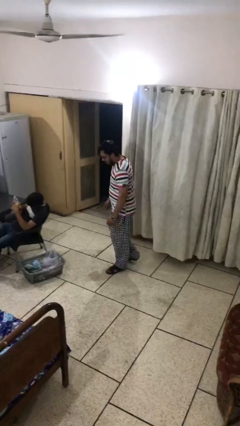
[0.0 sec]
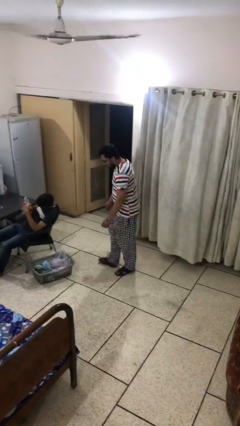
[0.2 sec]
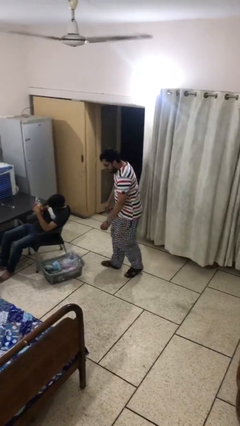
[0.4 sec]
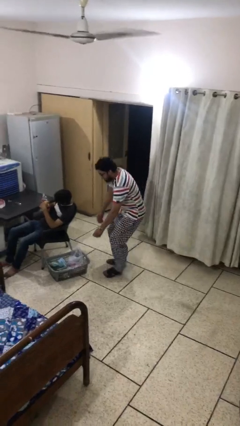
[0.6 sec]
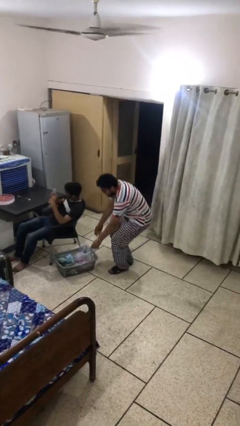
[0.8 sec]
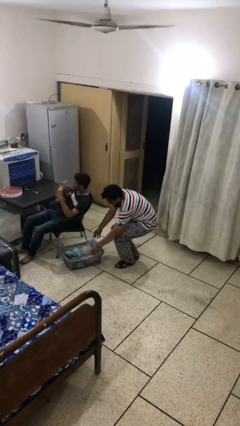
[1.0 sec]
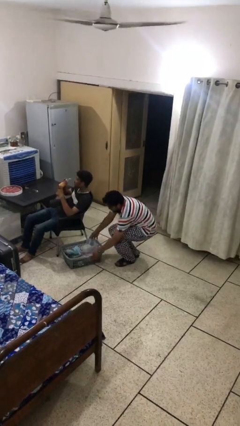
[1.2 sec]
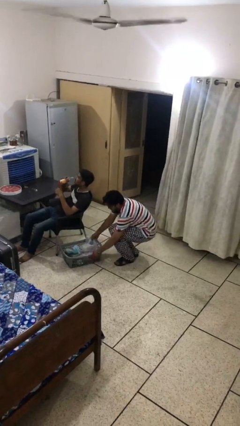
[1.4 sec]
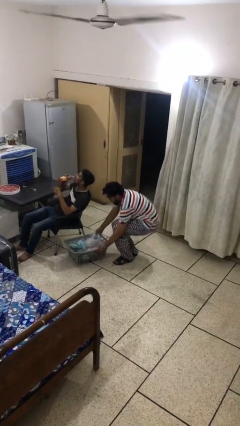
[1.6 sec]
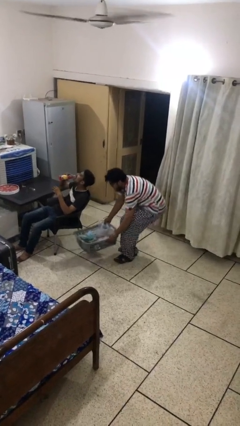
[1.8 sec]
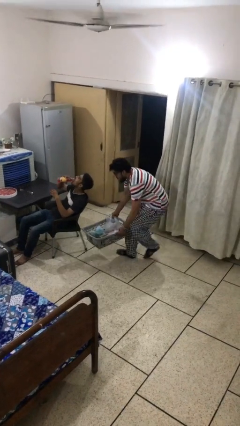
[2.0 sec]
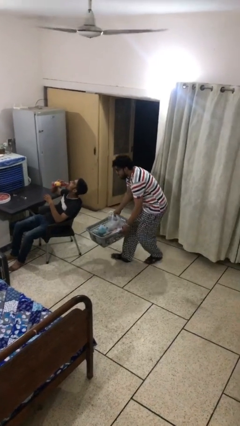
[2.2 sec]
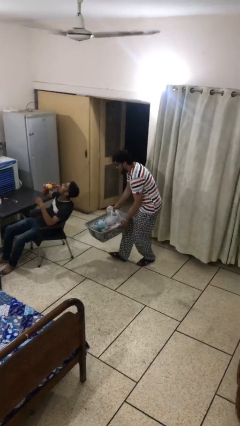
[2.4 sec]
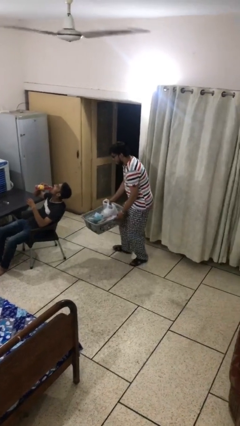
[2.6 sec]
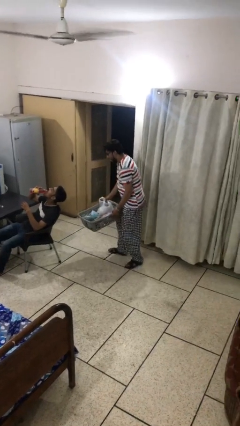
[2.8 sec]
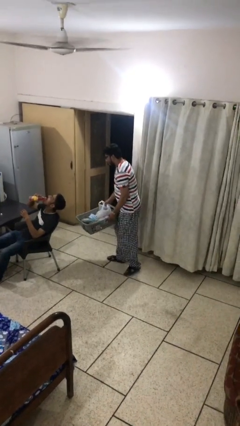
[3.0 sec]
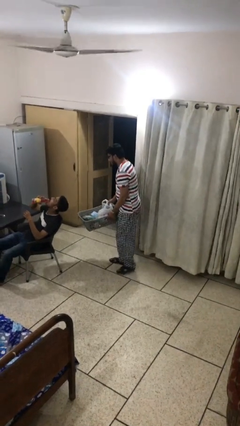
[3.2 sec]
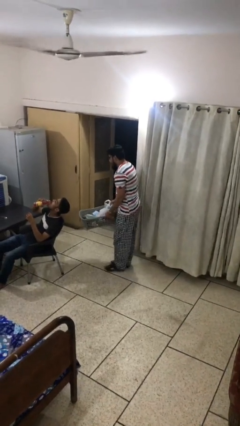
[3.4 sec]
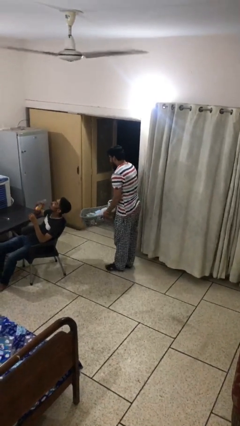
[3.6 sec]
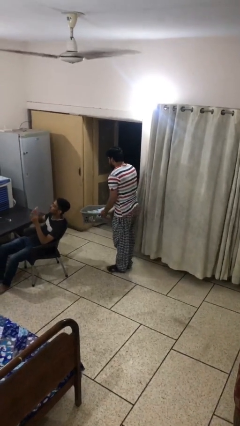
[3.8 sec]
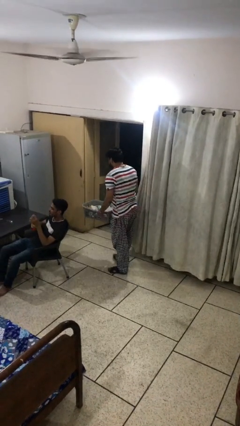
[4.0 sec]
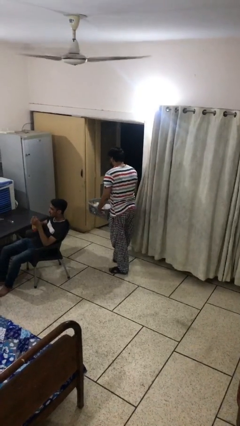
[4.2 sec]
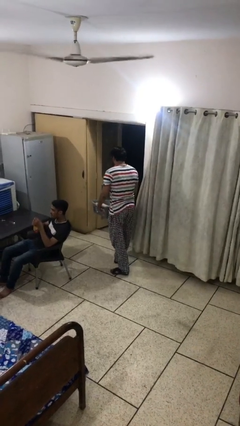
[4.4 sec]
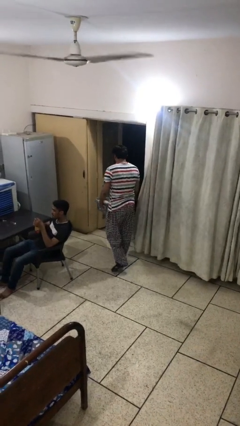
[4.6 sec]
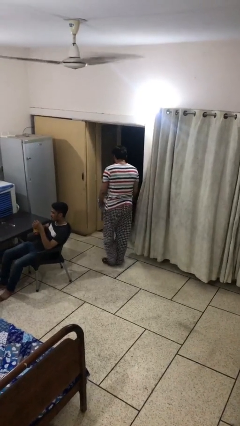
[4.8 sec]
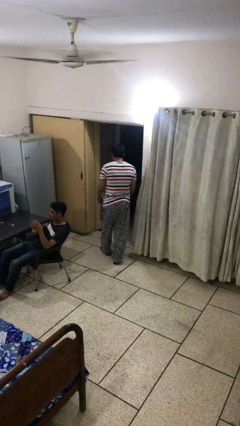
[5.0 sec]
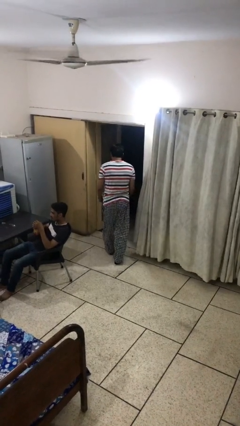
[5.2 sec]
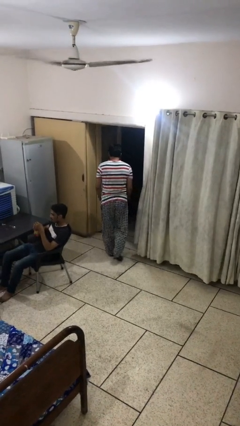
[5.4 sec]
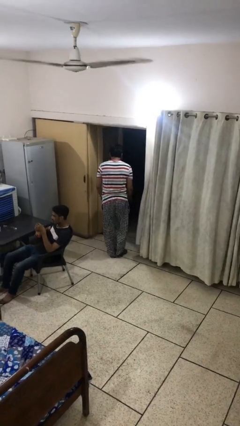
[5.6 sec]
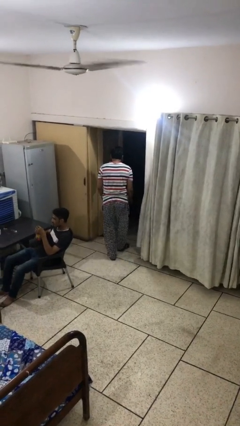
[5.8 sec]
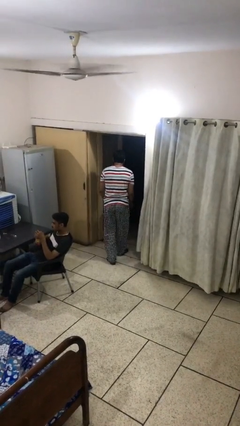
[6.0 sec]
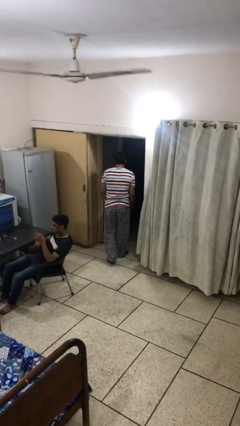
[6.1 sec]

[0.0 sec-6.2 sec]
person steals object from person

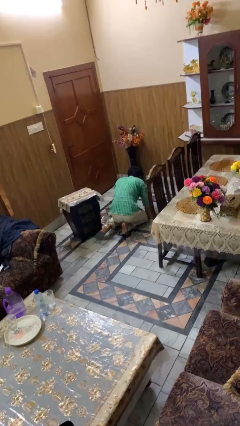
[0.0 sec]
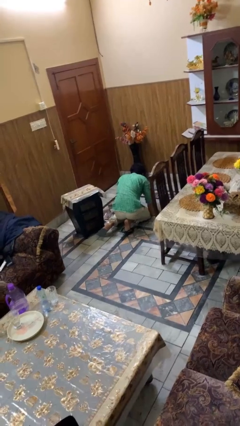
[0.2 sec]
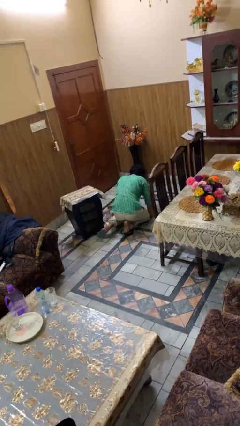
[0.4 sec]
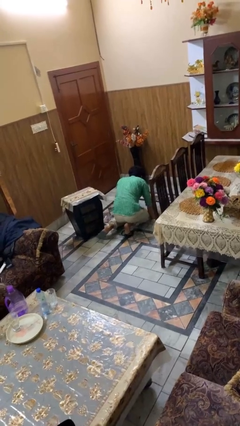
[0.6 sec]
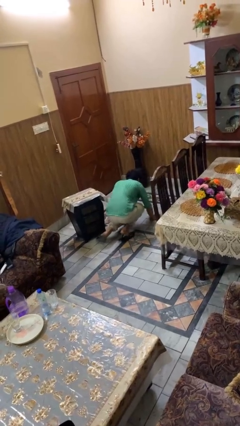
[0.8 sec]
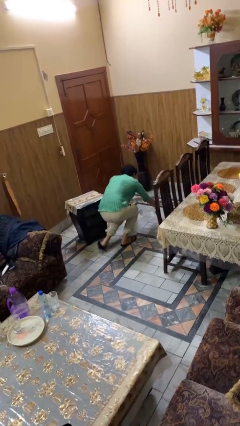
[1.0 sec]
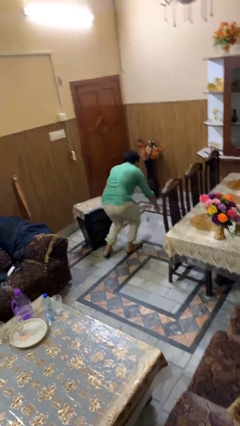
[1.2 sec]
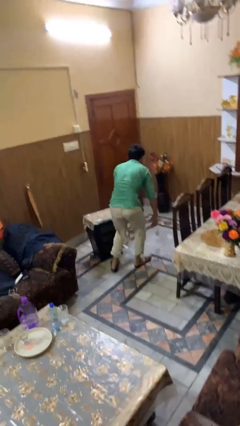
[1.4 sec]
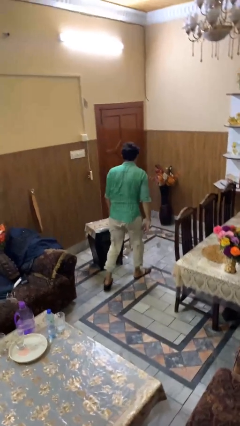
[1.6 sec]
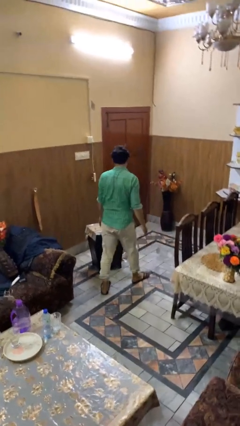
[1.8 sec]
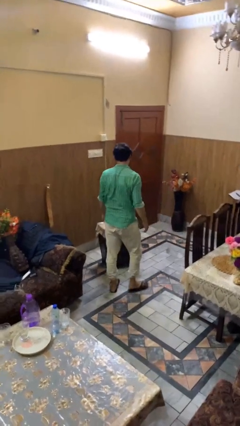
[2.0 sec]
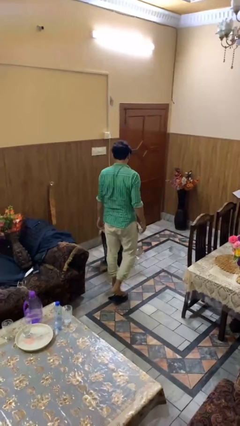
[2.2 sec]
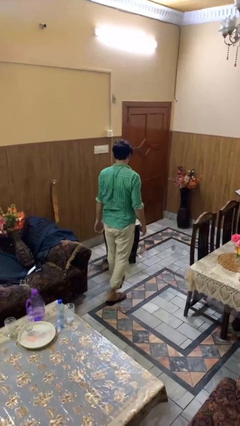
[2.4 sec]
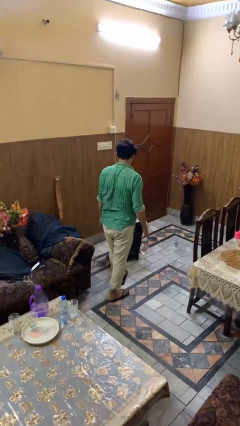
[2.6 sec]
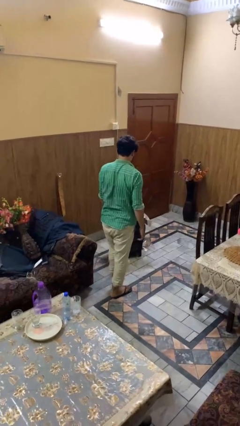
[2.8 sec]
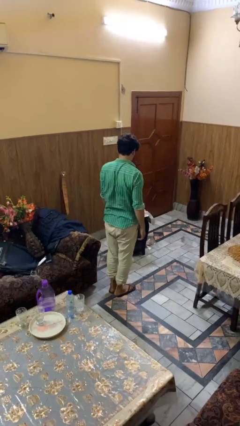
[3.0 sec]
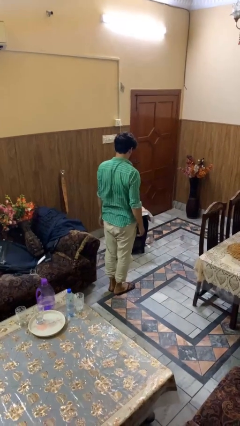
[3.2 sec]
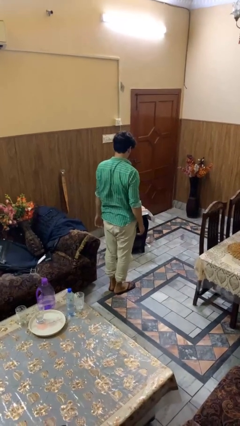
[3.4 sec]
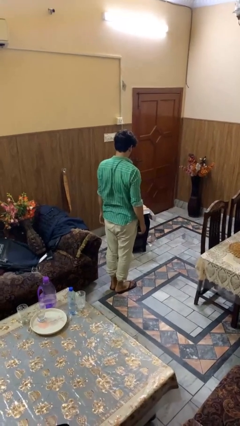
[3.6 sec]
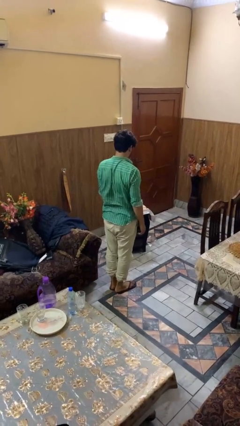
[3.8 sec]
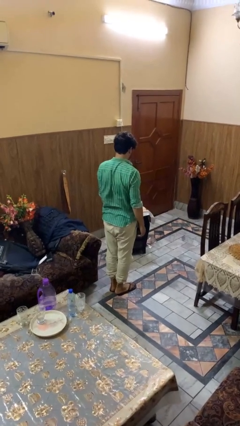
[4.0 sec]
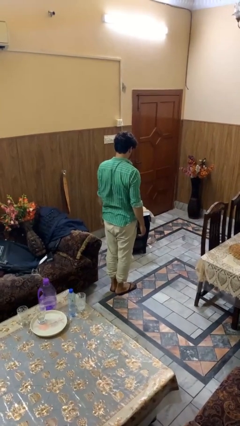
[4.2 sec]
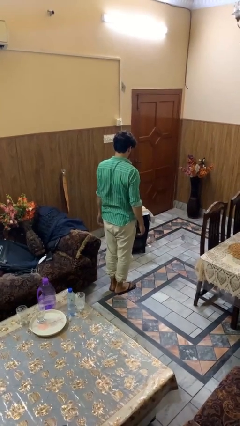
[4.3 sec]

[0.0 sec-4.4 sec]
person stands up from floor

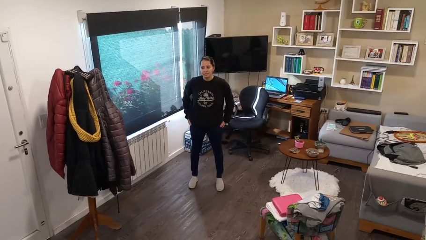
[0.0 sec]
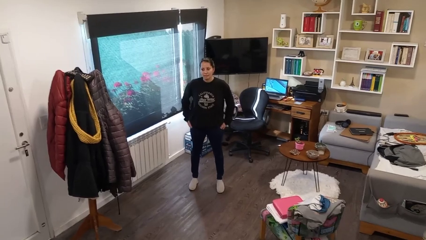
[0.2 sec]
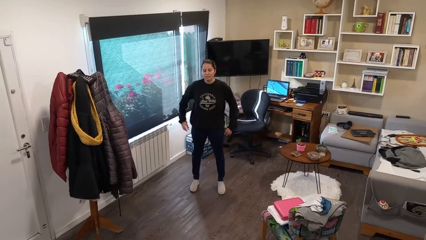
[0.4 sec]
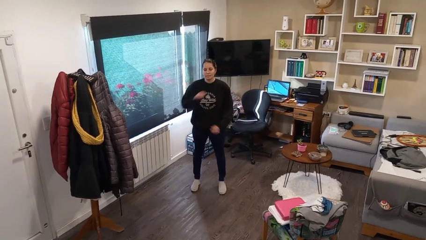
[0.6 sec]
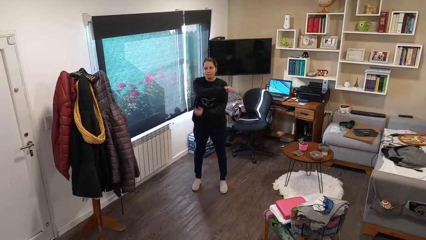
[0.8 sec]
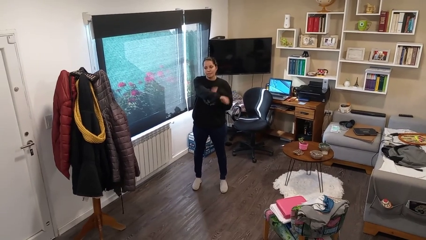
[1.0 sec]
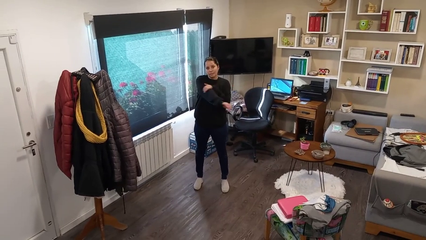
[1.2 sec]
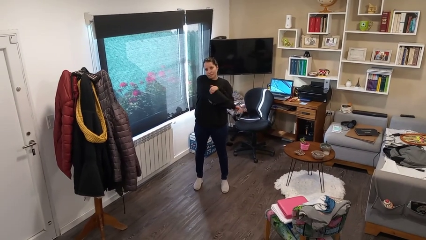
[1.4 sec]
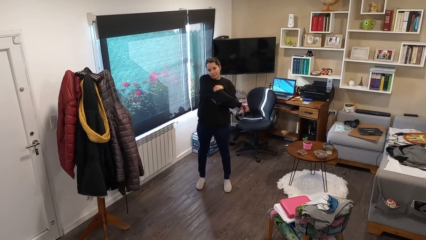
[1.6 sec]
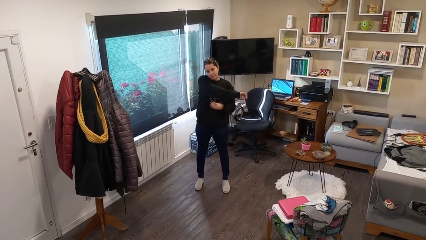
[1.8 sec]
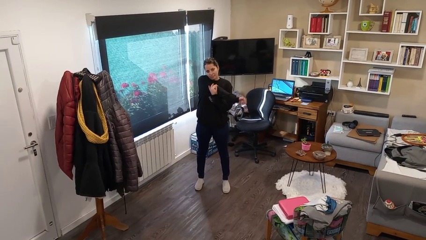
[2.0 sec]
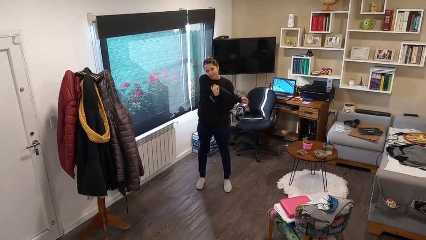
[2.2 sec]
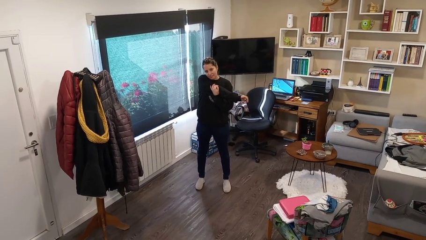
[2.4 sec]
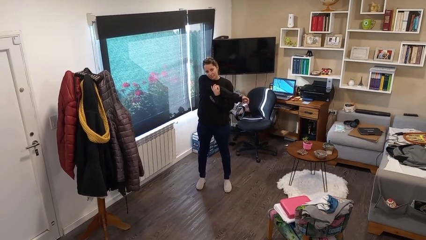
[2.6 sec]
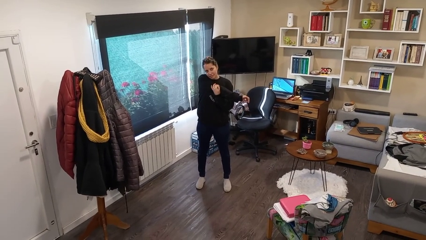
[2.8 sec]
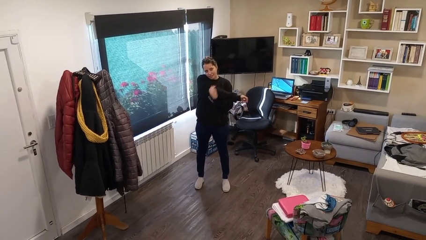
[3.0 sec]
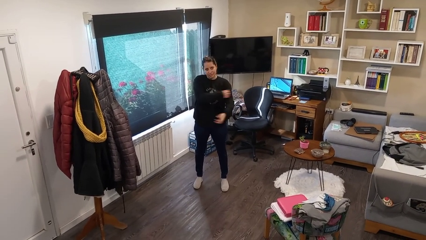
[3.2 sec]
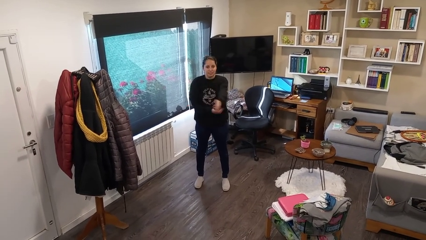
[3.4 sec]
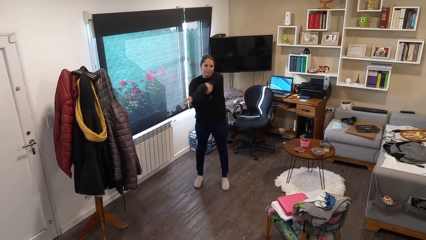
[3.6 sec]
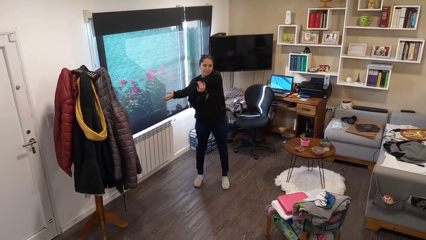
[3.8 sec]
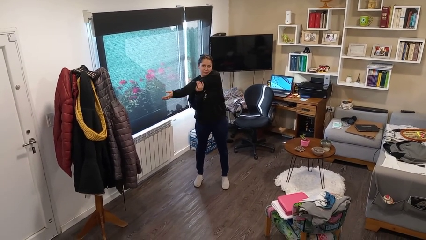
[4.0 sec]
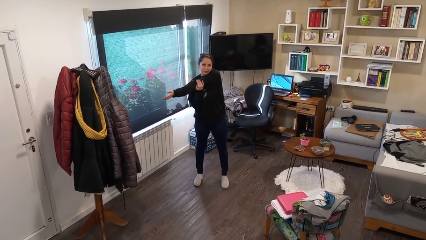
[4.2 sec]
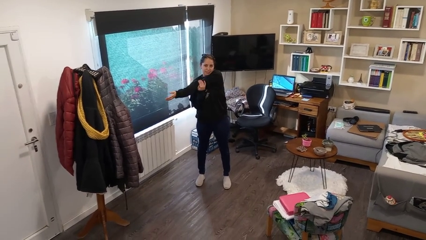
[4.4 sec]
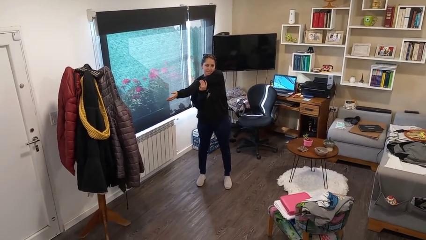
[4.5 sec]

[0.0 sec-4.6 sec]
person stretches arms to side

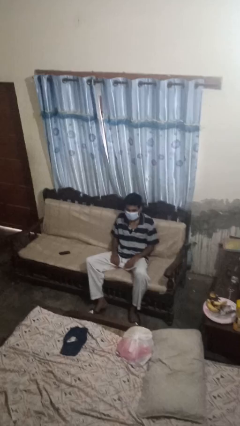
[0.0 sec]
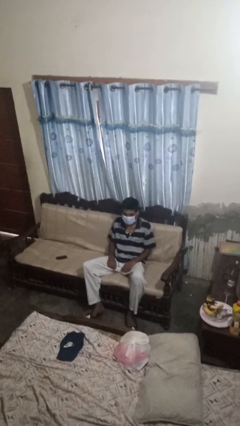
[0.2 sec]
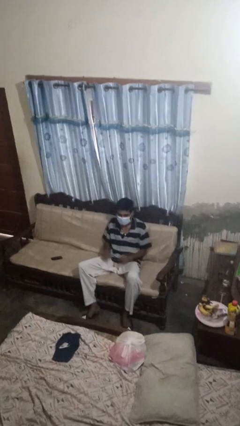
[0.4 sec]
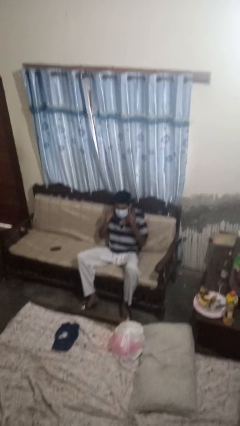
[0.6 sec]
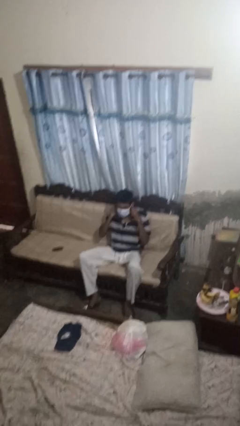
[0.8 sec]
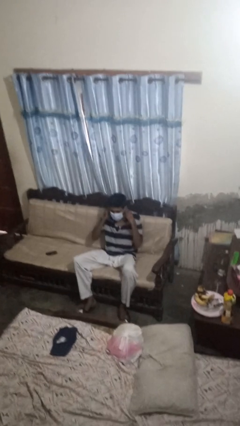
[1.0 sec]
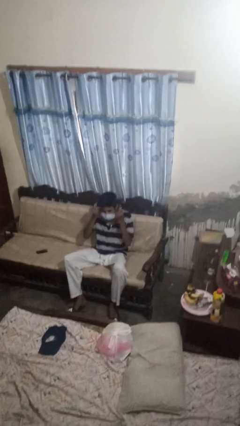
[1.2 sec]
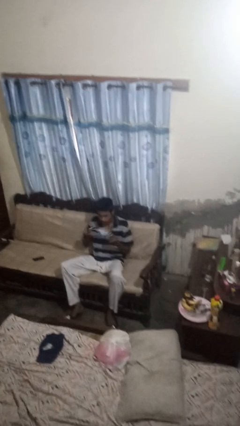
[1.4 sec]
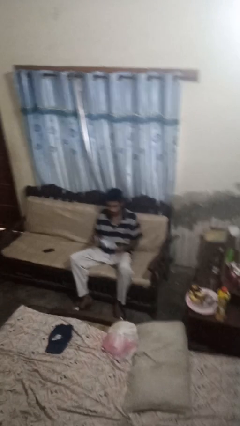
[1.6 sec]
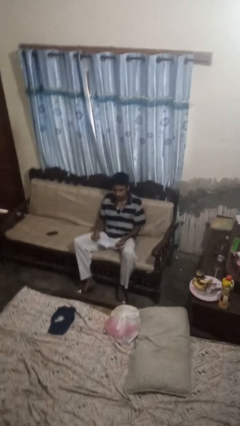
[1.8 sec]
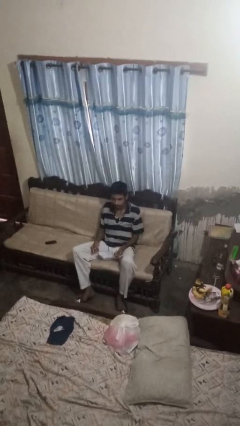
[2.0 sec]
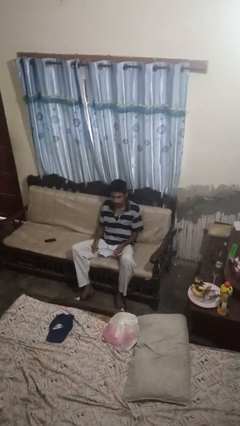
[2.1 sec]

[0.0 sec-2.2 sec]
person takes off facemask

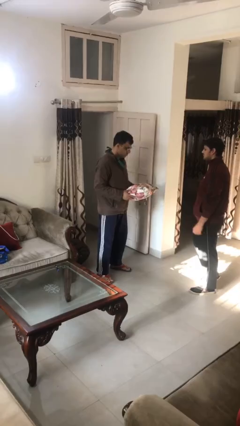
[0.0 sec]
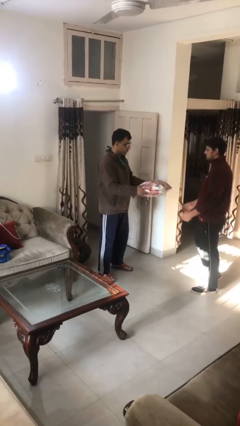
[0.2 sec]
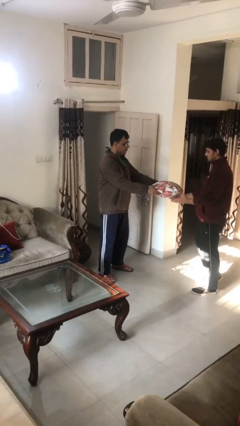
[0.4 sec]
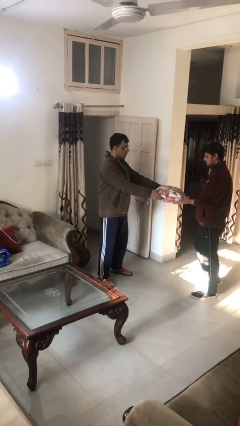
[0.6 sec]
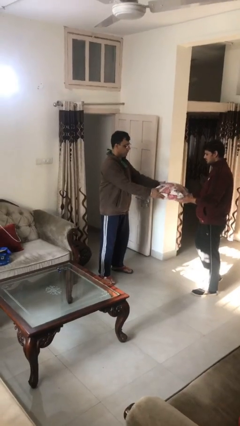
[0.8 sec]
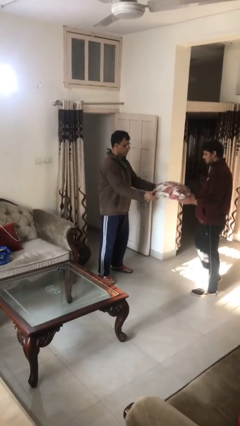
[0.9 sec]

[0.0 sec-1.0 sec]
person transfers object to person
